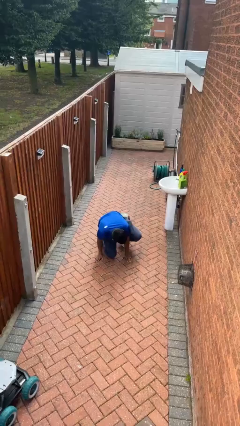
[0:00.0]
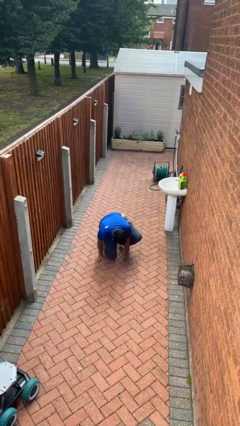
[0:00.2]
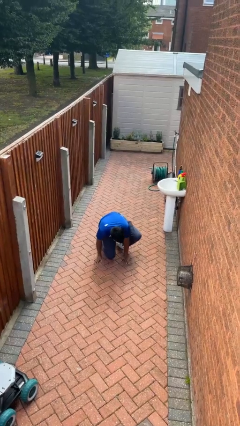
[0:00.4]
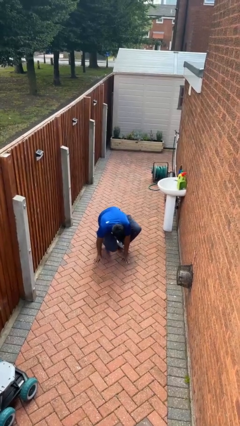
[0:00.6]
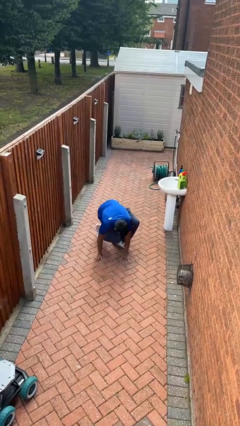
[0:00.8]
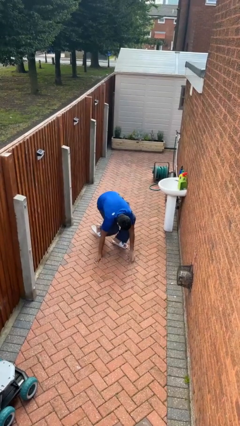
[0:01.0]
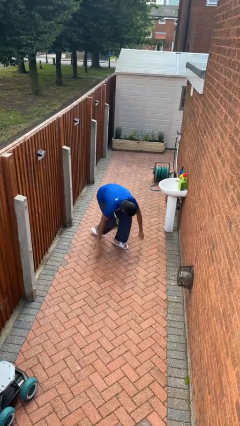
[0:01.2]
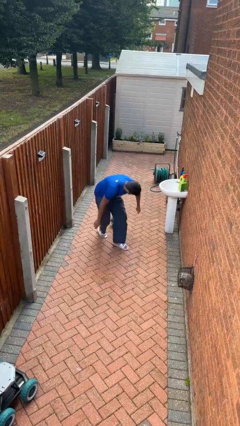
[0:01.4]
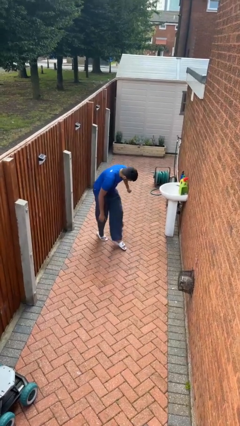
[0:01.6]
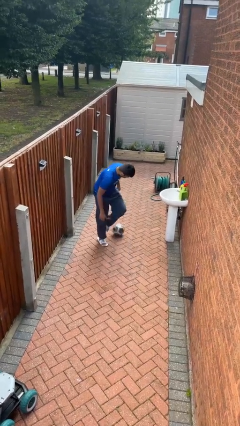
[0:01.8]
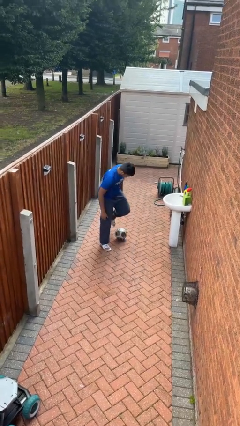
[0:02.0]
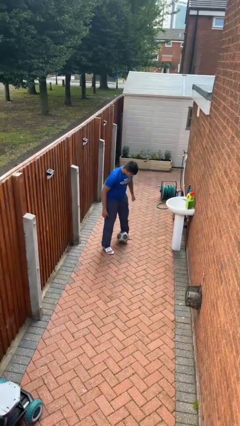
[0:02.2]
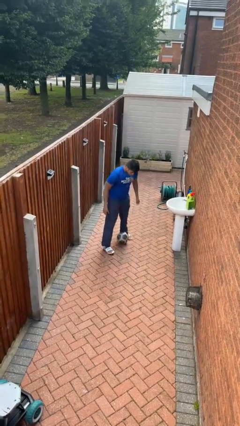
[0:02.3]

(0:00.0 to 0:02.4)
person stands up from floor

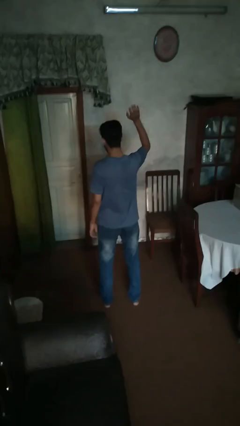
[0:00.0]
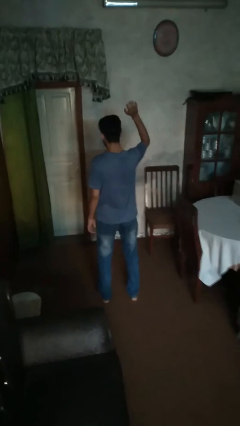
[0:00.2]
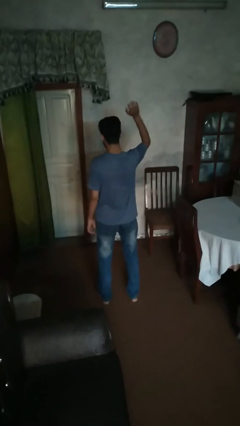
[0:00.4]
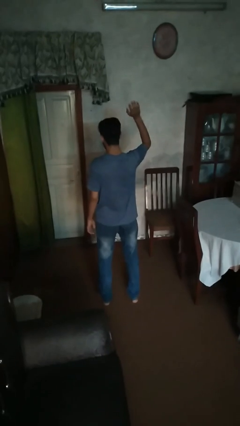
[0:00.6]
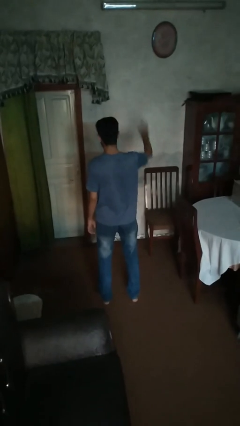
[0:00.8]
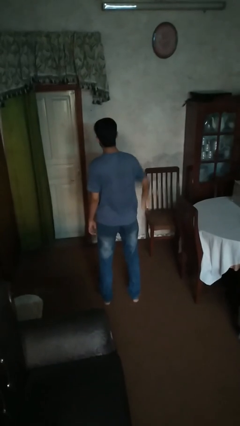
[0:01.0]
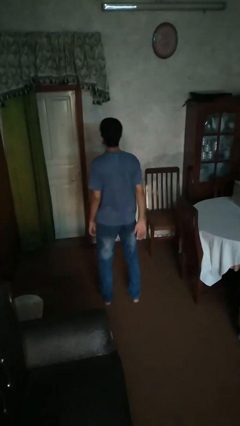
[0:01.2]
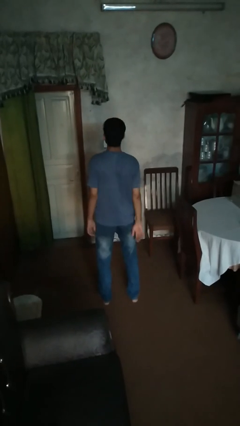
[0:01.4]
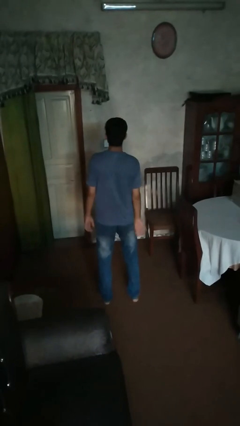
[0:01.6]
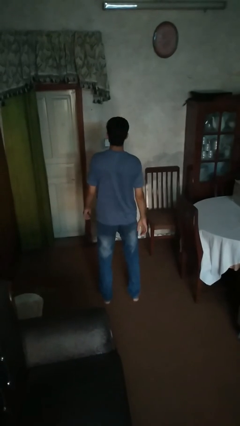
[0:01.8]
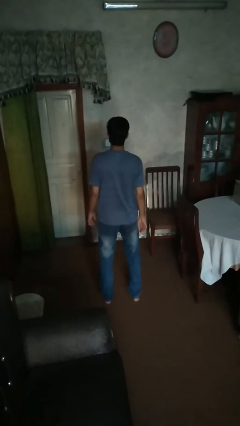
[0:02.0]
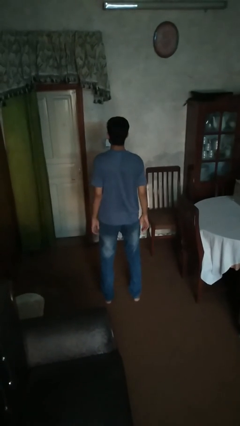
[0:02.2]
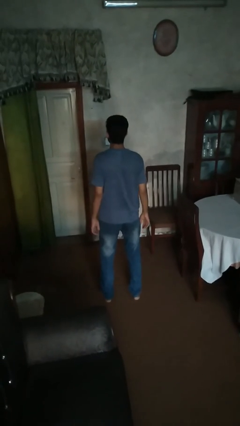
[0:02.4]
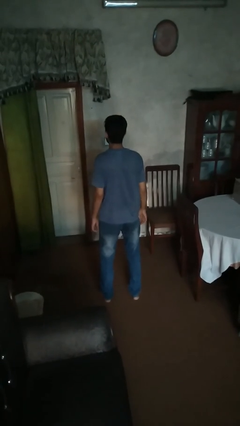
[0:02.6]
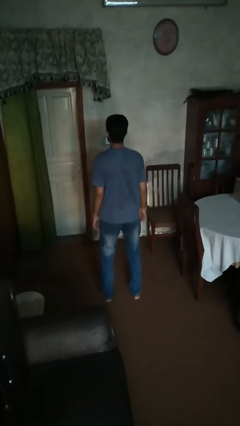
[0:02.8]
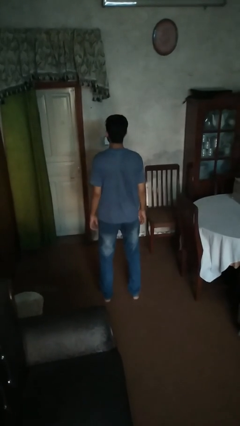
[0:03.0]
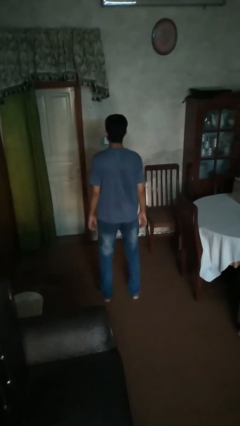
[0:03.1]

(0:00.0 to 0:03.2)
person gestures lower hand

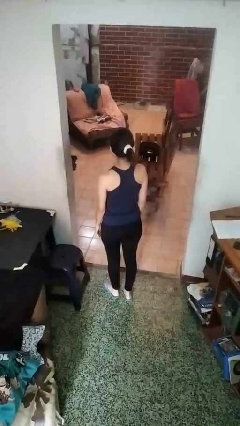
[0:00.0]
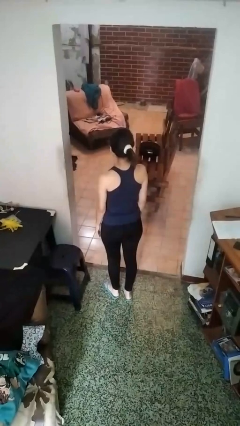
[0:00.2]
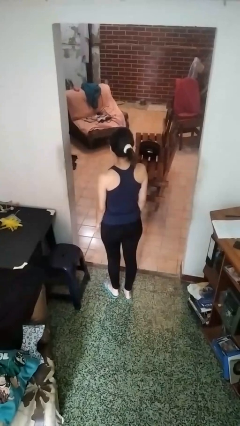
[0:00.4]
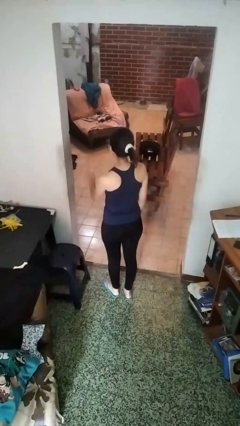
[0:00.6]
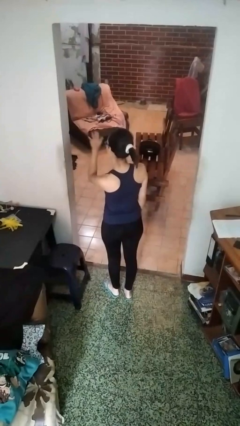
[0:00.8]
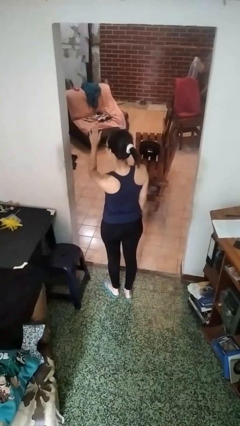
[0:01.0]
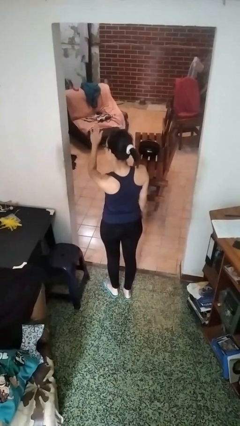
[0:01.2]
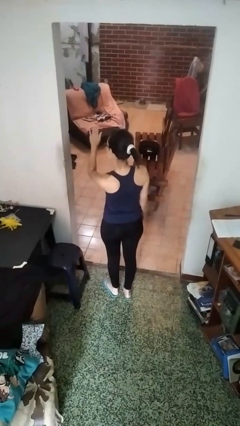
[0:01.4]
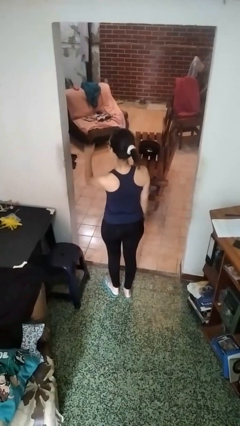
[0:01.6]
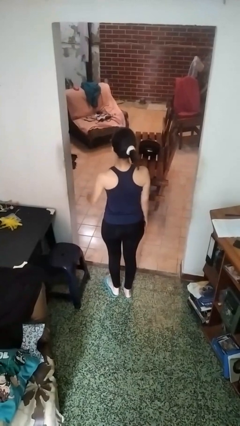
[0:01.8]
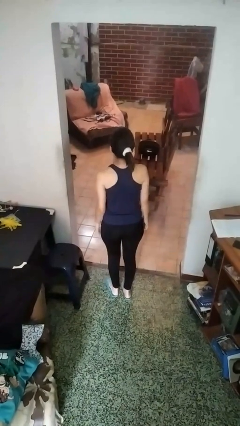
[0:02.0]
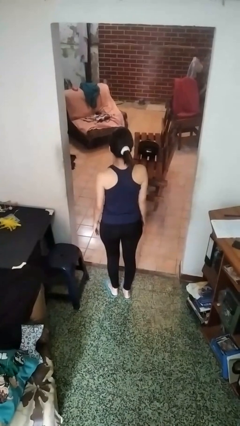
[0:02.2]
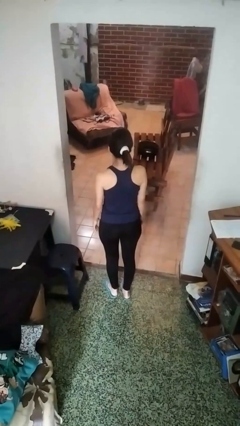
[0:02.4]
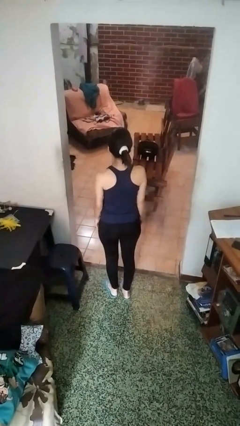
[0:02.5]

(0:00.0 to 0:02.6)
person gestures stop

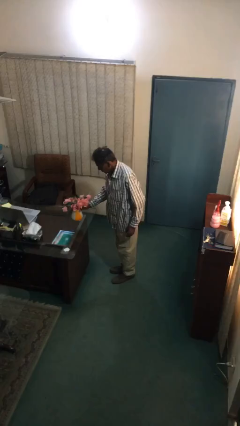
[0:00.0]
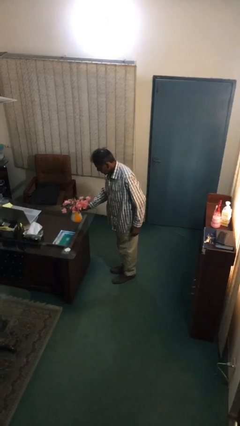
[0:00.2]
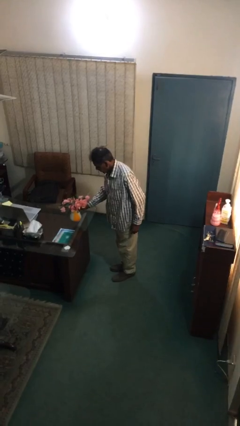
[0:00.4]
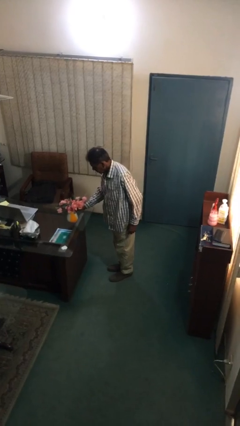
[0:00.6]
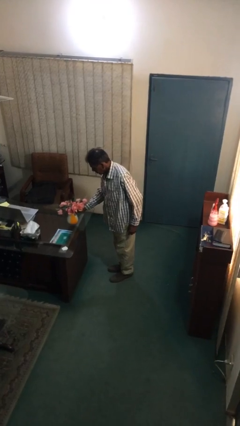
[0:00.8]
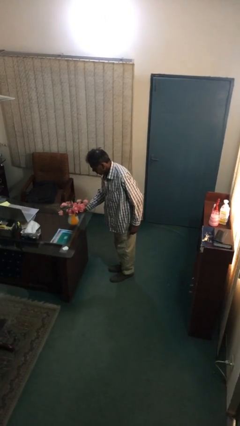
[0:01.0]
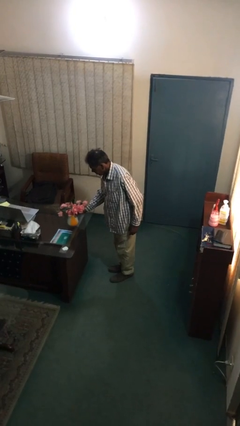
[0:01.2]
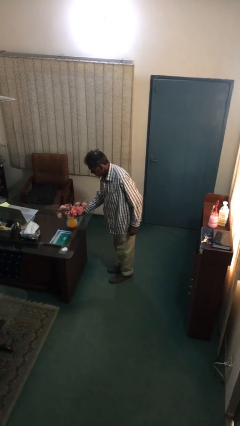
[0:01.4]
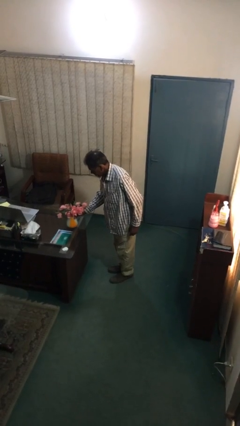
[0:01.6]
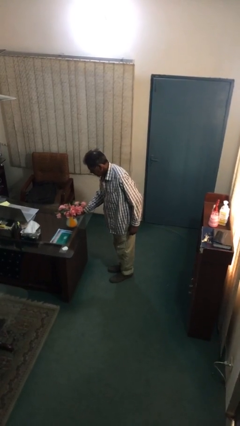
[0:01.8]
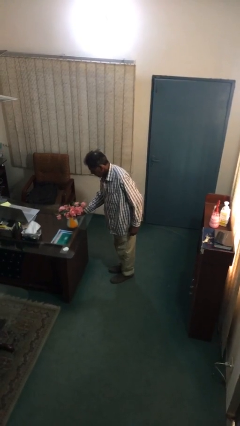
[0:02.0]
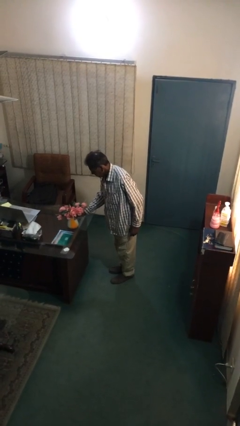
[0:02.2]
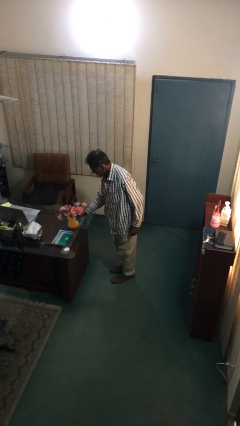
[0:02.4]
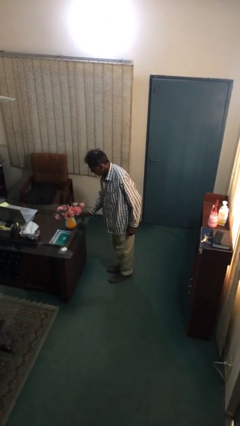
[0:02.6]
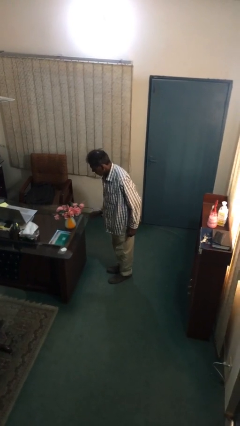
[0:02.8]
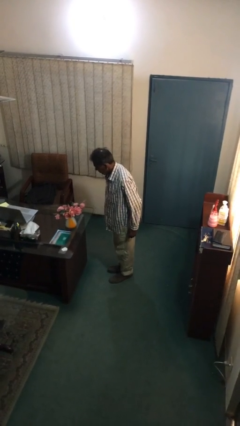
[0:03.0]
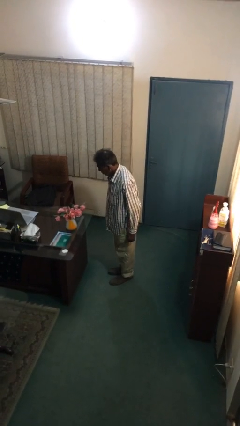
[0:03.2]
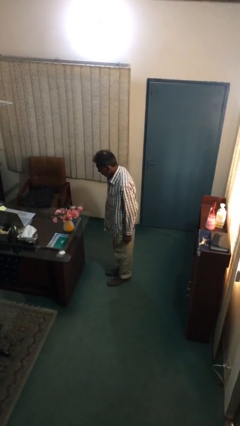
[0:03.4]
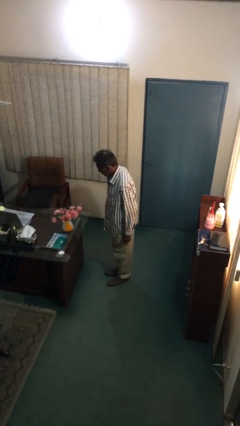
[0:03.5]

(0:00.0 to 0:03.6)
person puts down object on table

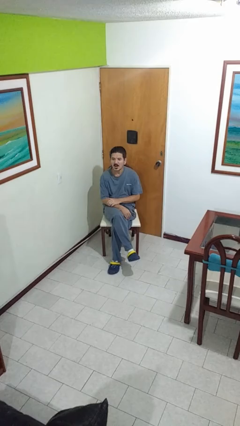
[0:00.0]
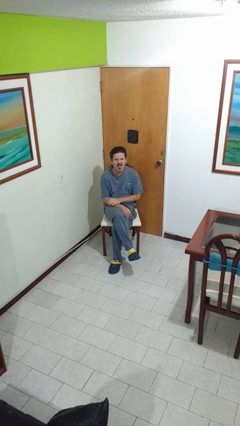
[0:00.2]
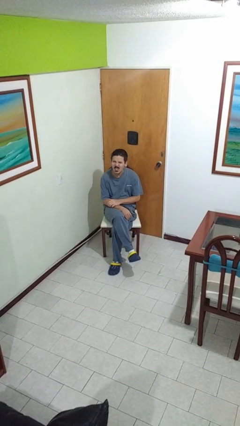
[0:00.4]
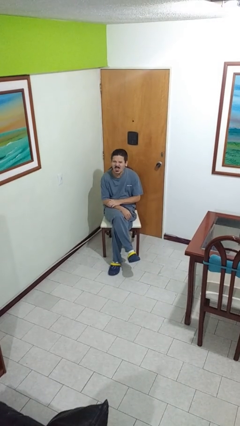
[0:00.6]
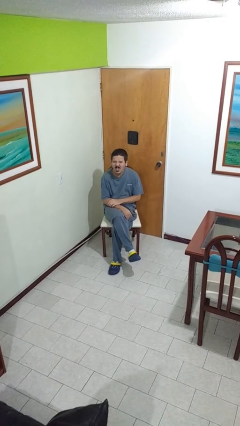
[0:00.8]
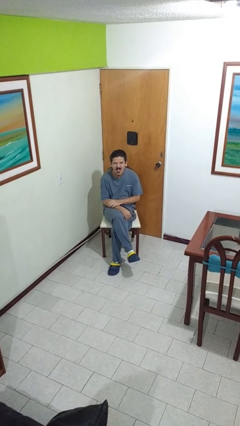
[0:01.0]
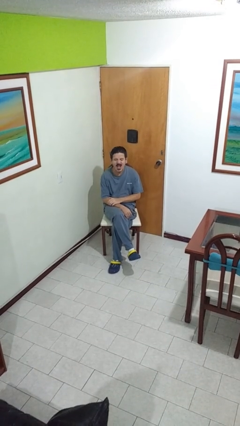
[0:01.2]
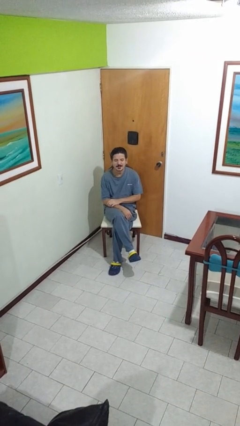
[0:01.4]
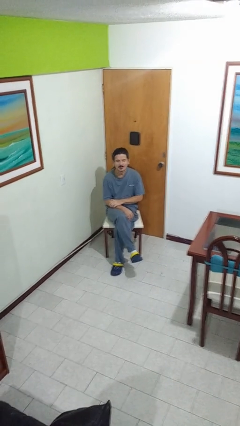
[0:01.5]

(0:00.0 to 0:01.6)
person sticks out tongue

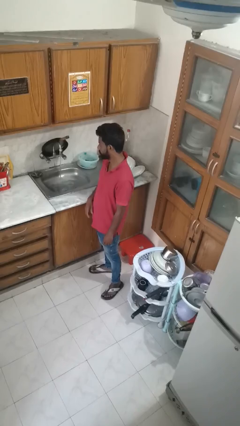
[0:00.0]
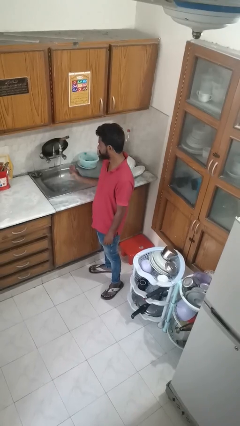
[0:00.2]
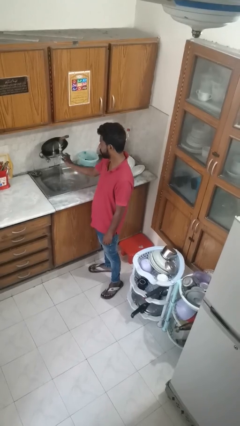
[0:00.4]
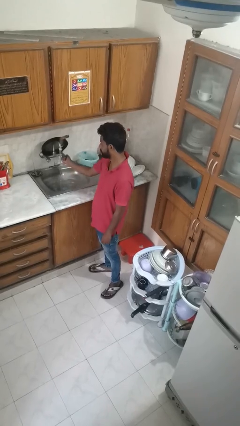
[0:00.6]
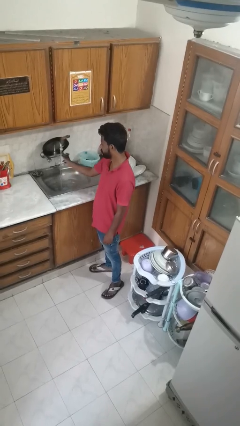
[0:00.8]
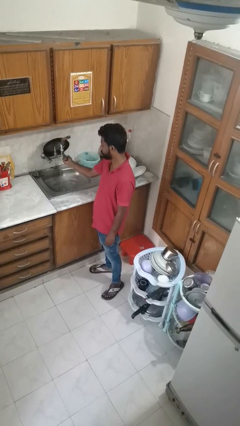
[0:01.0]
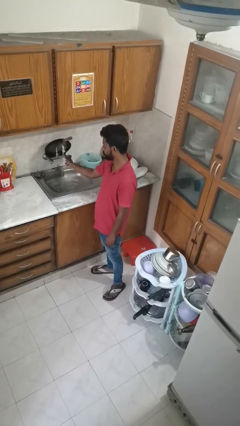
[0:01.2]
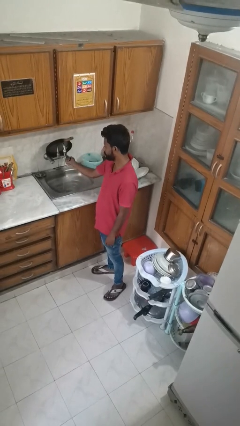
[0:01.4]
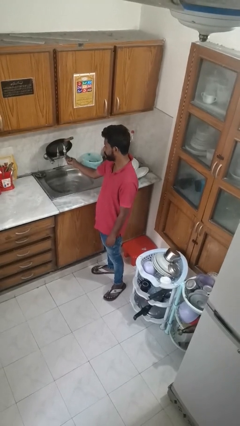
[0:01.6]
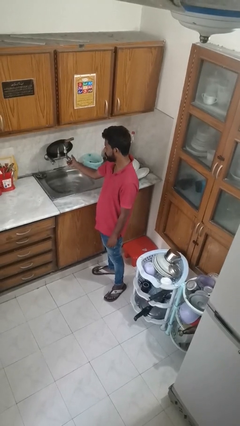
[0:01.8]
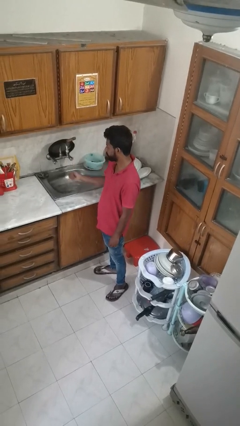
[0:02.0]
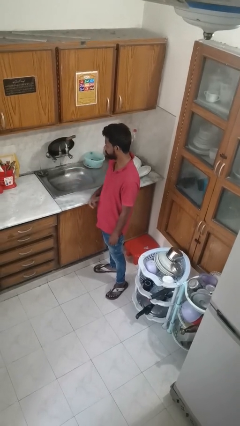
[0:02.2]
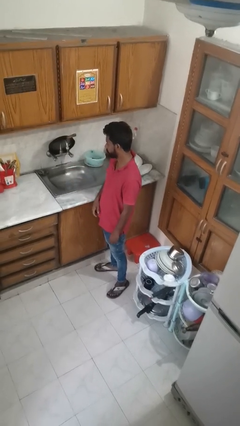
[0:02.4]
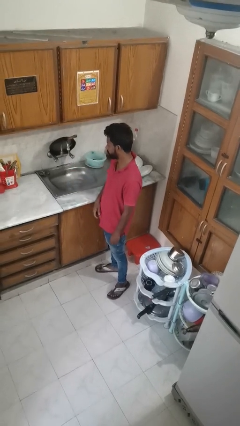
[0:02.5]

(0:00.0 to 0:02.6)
person turns off faucet

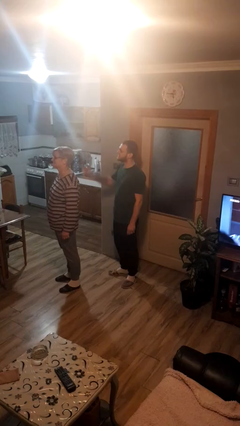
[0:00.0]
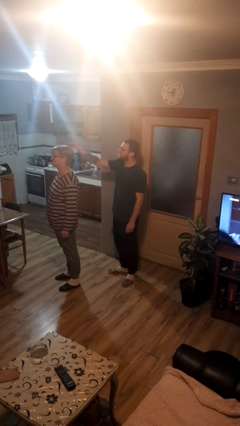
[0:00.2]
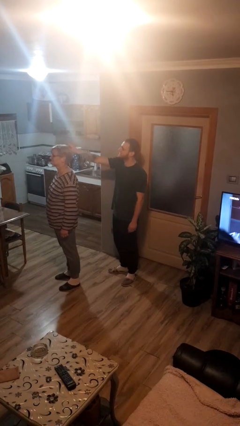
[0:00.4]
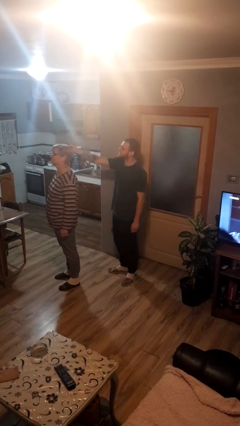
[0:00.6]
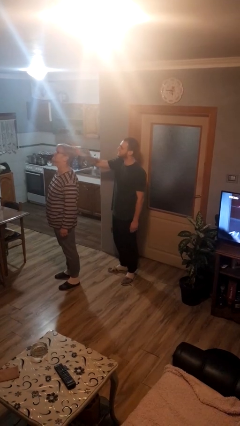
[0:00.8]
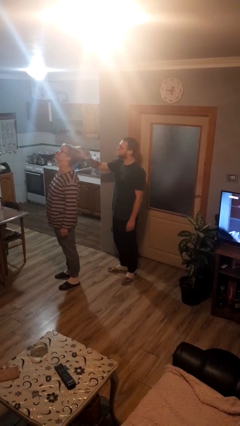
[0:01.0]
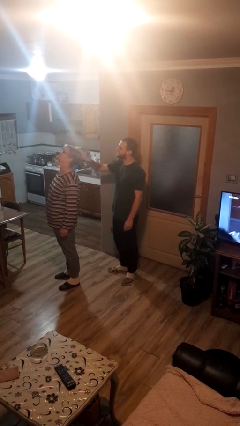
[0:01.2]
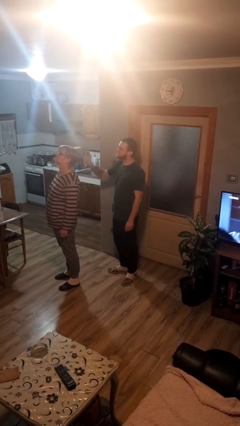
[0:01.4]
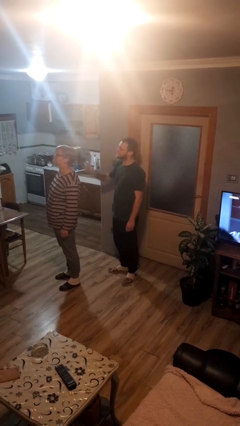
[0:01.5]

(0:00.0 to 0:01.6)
person grabs person by hair
